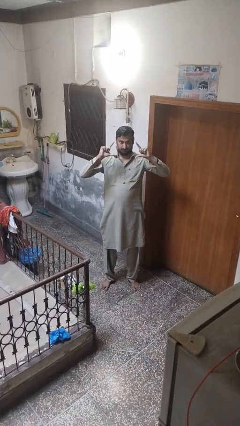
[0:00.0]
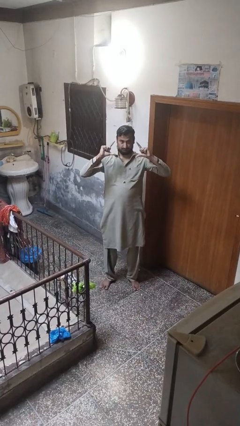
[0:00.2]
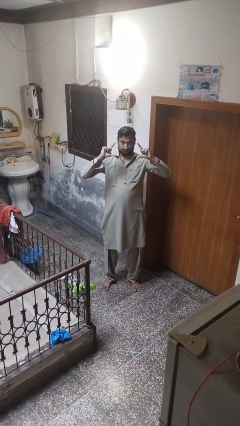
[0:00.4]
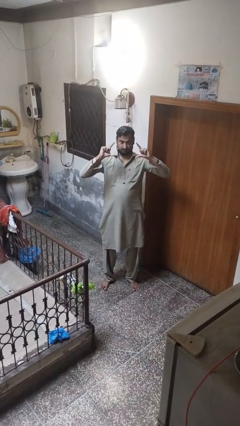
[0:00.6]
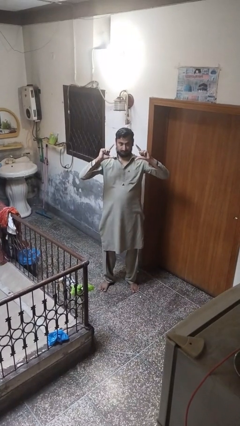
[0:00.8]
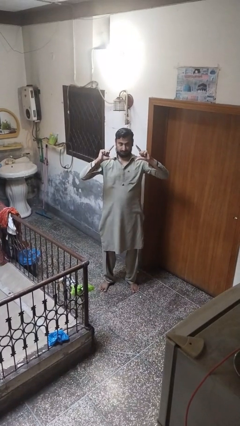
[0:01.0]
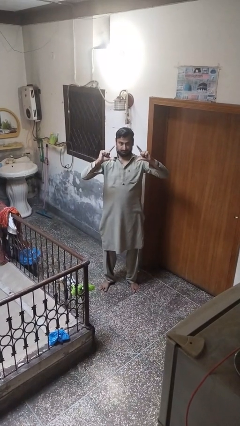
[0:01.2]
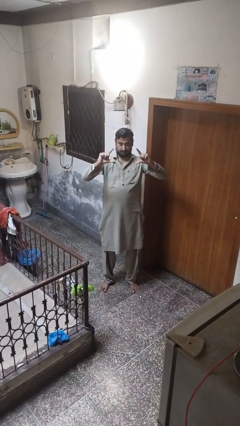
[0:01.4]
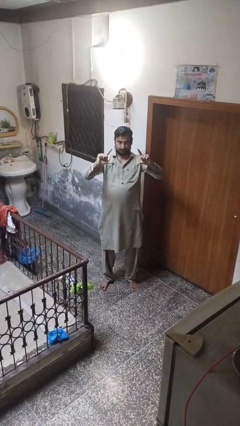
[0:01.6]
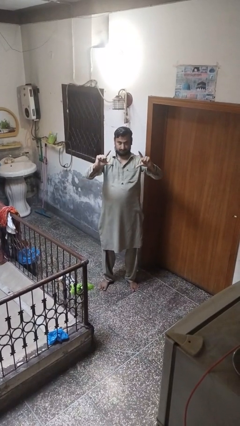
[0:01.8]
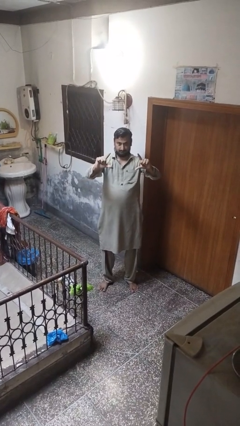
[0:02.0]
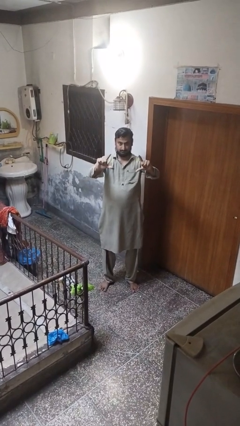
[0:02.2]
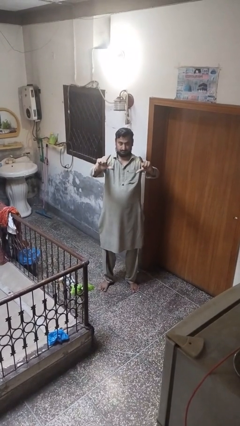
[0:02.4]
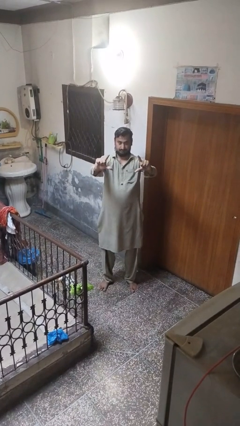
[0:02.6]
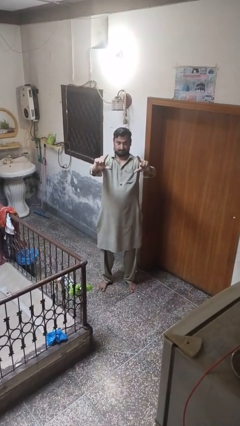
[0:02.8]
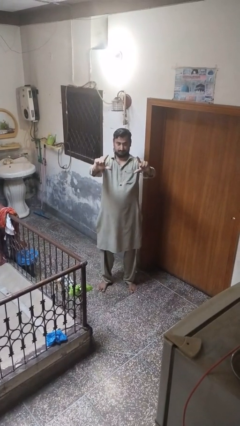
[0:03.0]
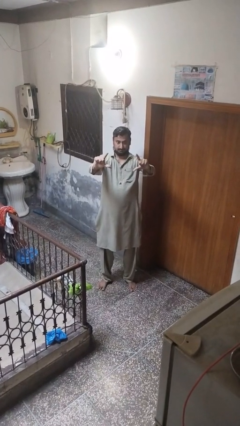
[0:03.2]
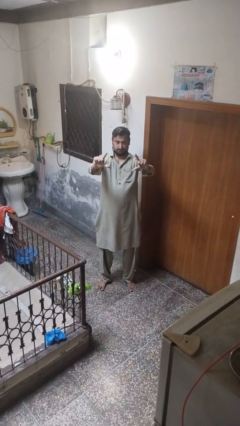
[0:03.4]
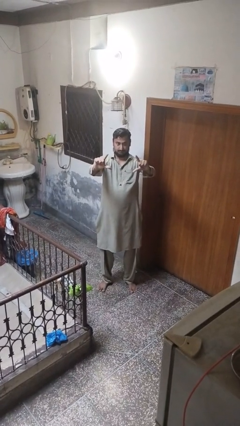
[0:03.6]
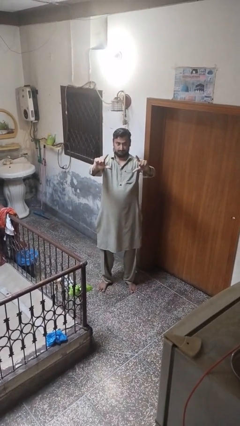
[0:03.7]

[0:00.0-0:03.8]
person gestures zoom out

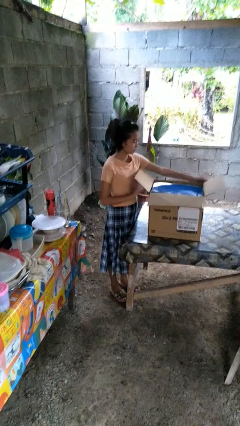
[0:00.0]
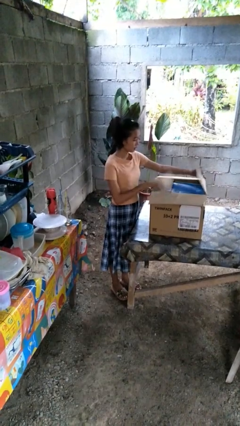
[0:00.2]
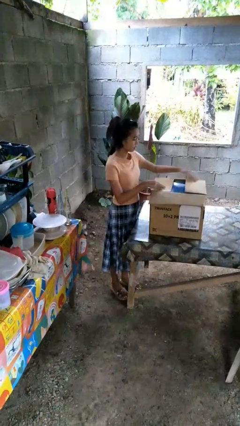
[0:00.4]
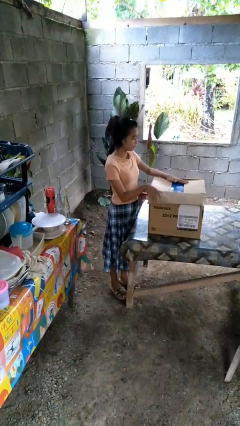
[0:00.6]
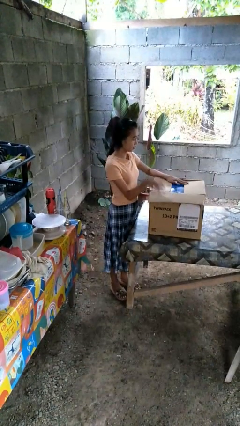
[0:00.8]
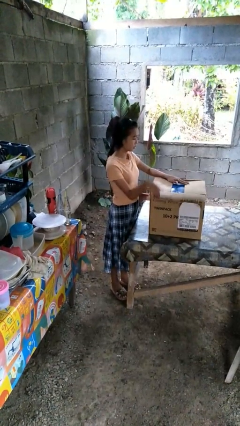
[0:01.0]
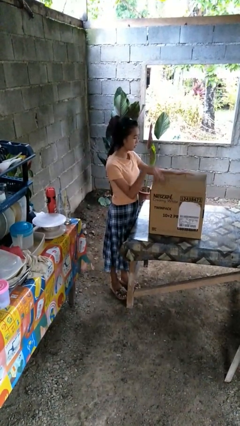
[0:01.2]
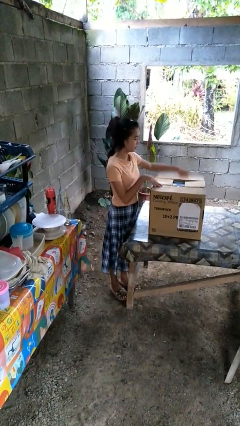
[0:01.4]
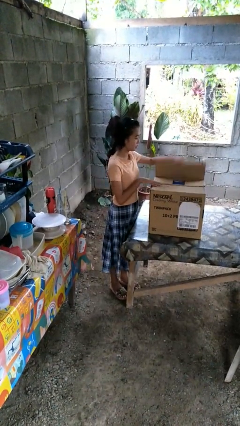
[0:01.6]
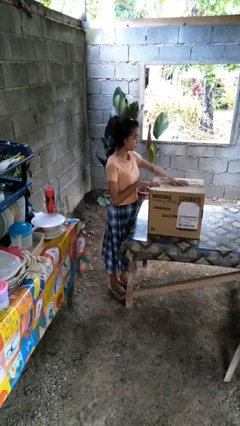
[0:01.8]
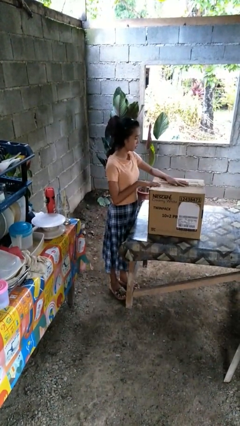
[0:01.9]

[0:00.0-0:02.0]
person closes box

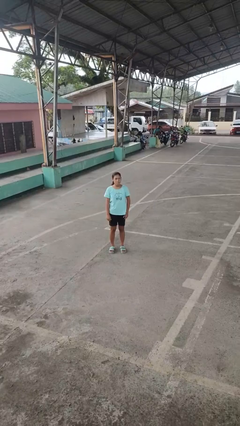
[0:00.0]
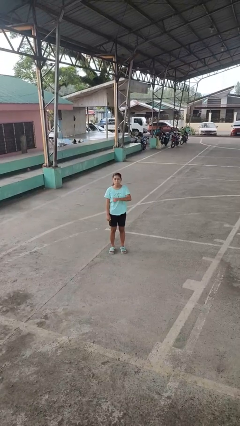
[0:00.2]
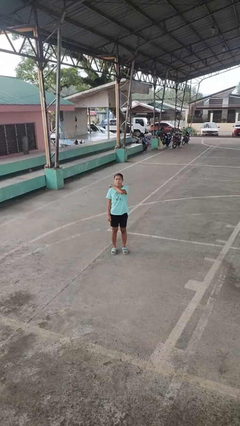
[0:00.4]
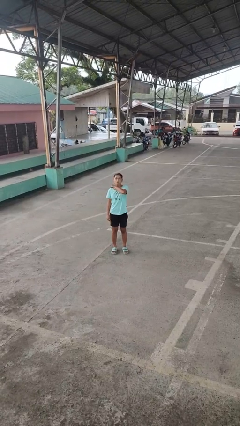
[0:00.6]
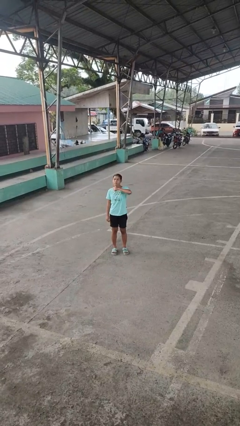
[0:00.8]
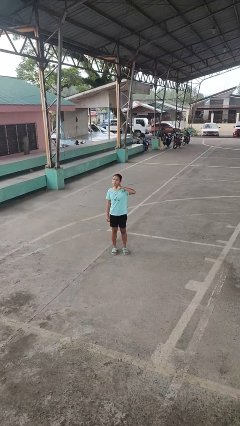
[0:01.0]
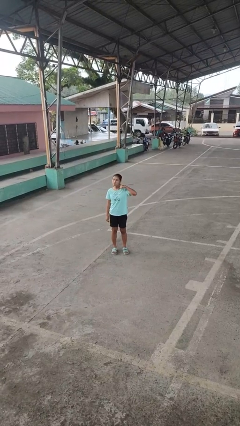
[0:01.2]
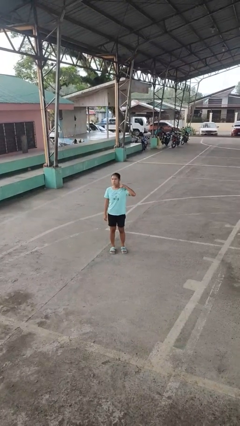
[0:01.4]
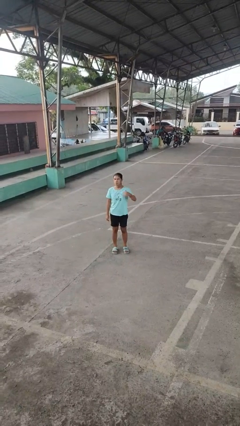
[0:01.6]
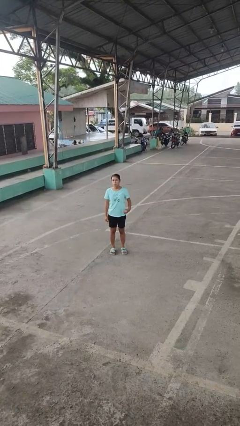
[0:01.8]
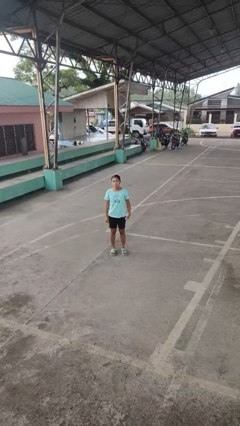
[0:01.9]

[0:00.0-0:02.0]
person gestures cut

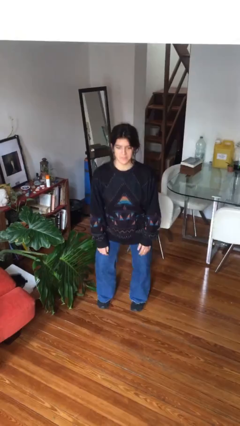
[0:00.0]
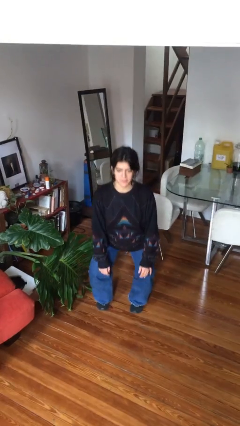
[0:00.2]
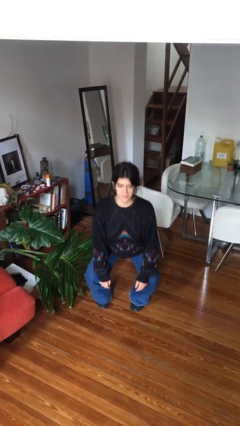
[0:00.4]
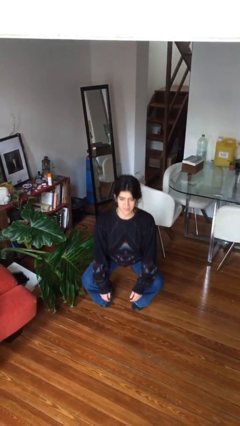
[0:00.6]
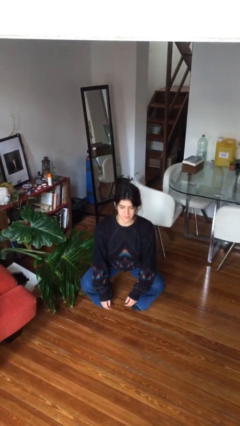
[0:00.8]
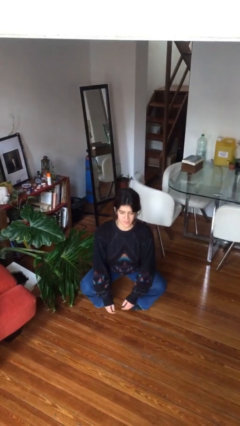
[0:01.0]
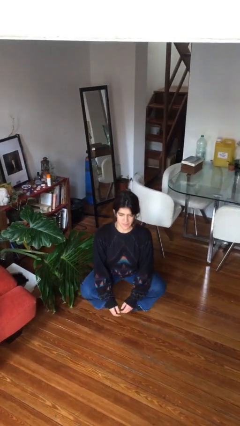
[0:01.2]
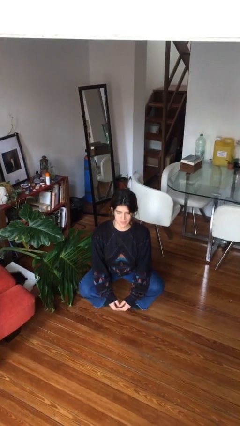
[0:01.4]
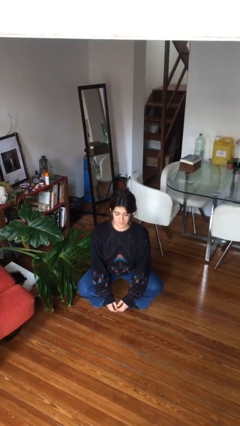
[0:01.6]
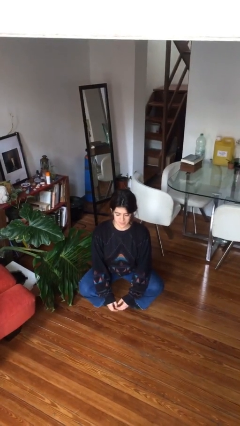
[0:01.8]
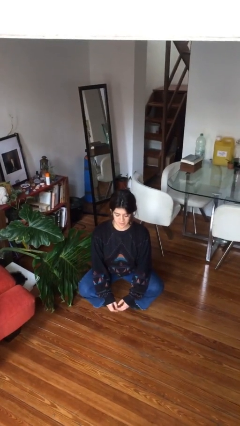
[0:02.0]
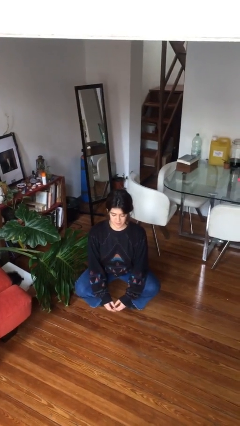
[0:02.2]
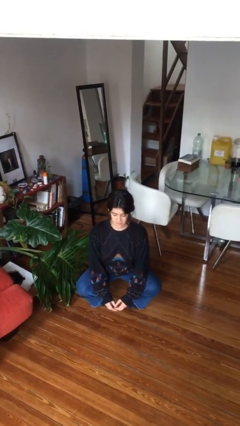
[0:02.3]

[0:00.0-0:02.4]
person squats

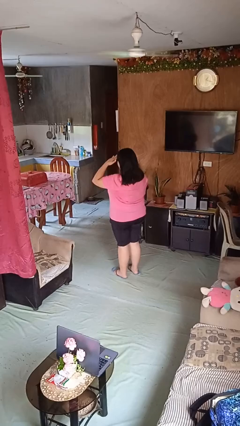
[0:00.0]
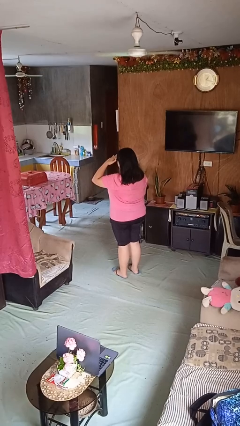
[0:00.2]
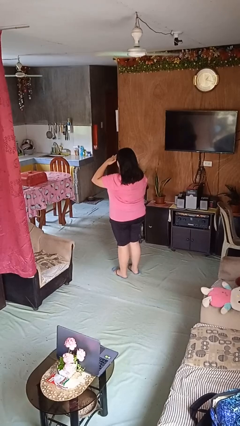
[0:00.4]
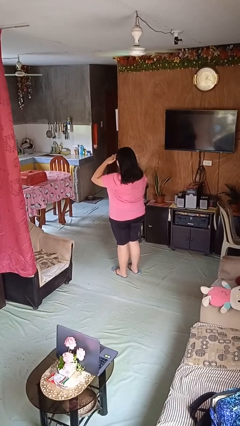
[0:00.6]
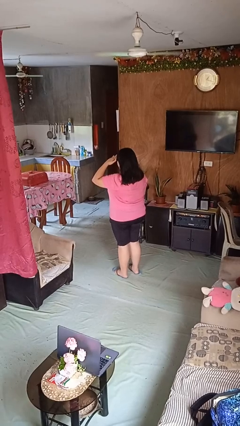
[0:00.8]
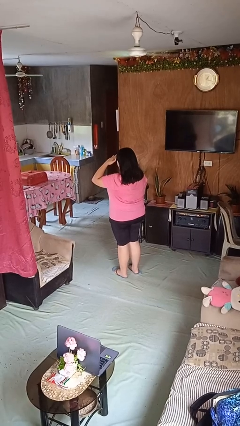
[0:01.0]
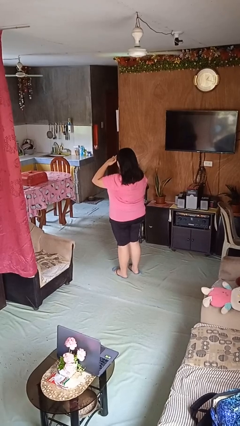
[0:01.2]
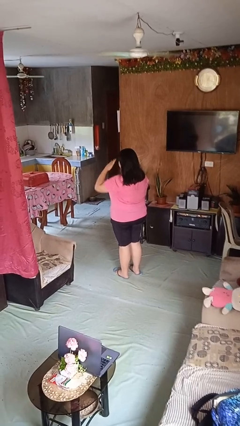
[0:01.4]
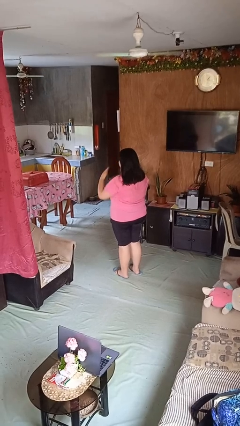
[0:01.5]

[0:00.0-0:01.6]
person salutes

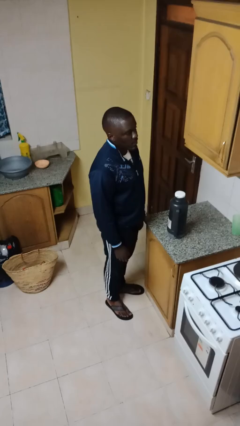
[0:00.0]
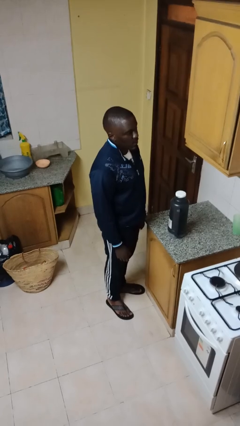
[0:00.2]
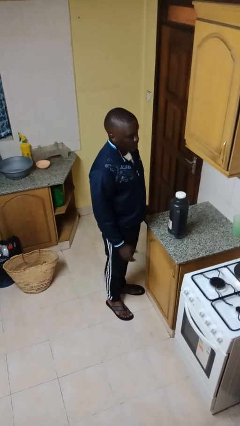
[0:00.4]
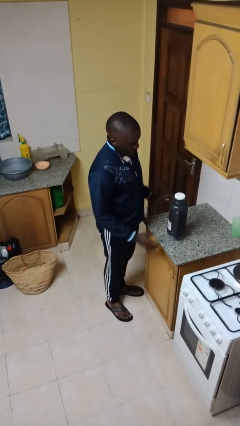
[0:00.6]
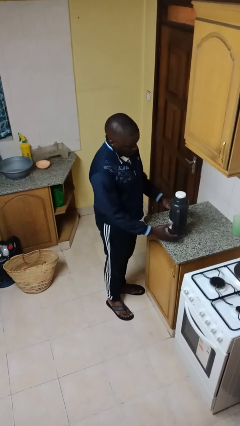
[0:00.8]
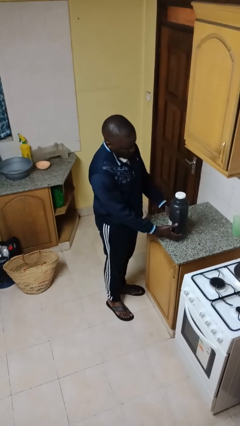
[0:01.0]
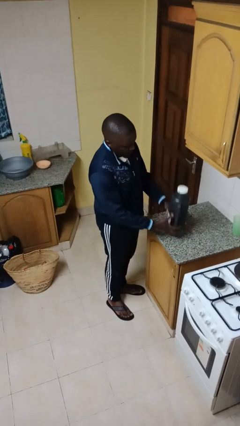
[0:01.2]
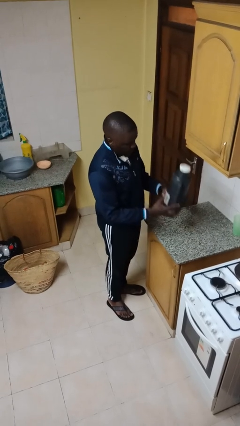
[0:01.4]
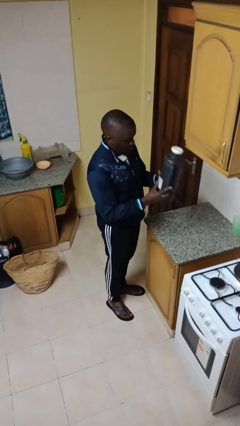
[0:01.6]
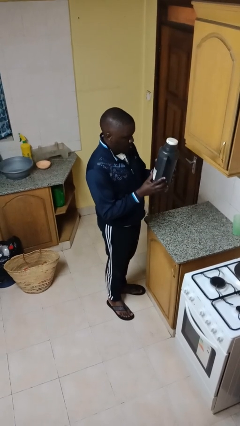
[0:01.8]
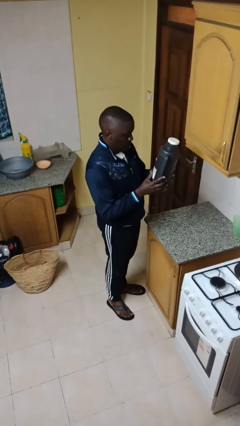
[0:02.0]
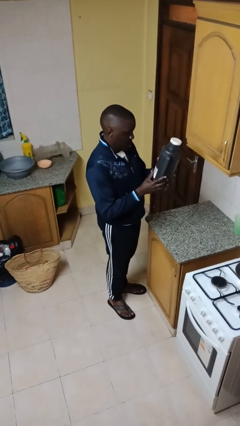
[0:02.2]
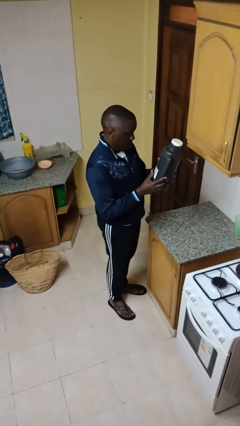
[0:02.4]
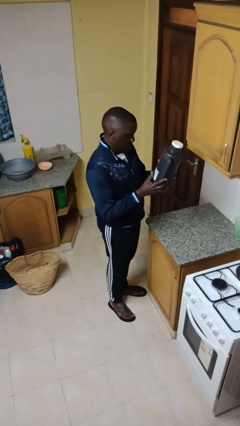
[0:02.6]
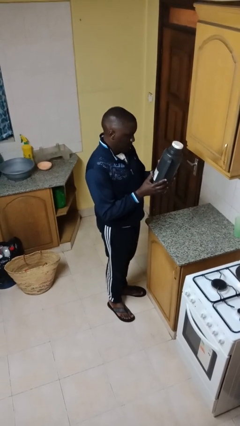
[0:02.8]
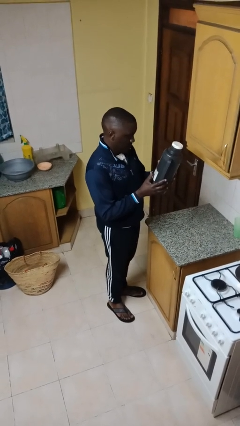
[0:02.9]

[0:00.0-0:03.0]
person picks up object from countertop

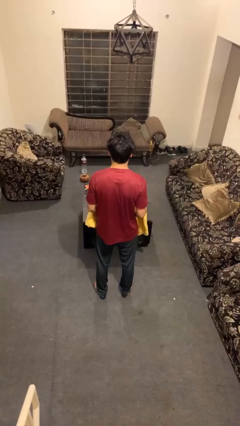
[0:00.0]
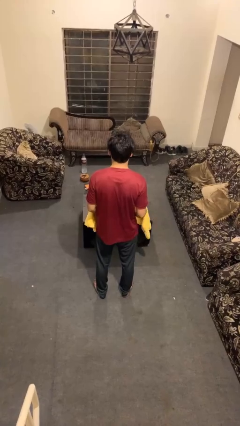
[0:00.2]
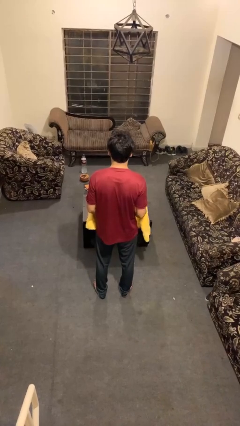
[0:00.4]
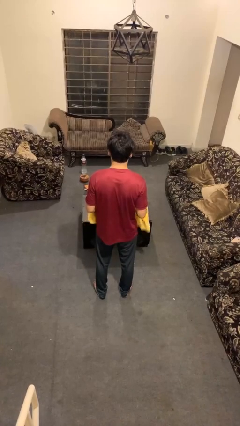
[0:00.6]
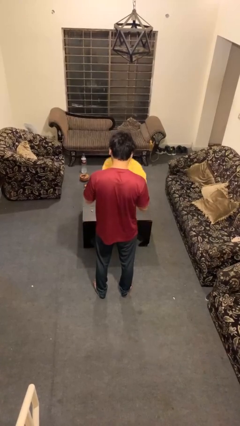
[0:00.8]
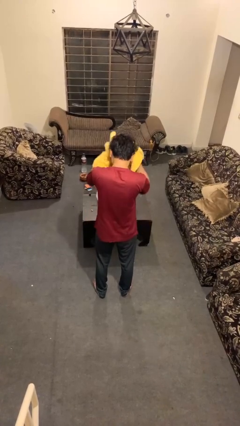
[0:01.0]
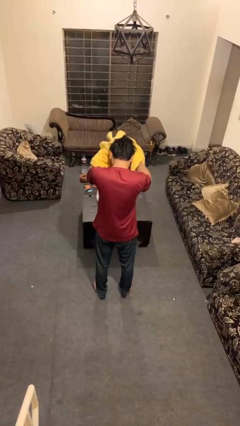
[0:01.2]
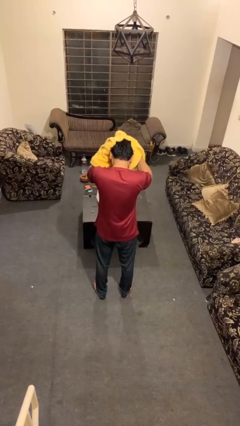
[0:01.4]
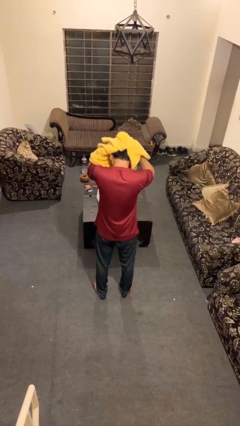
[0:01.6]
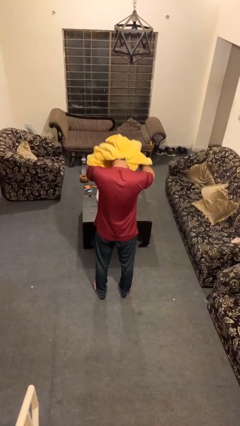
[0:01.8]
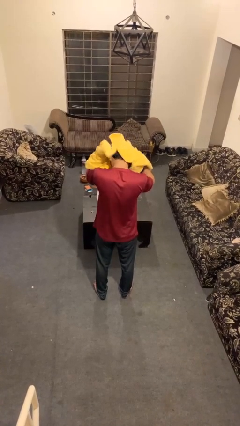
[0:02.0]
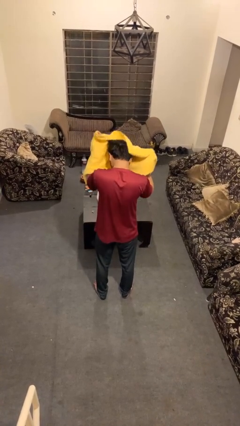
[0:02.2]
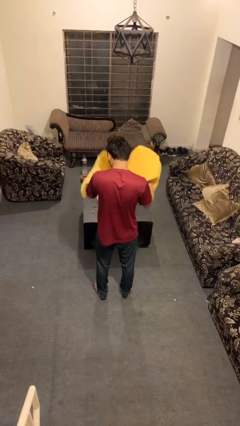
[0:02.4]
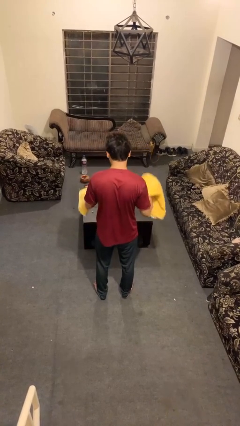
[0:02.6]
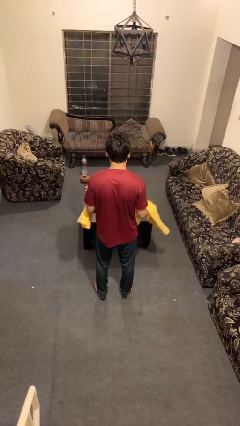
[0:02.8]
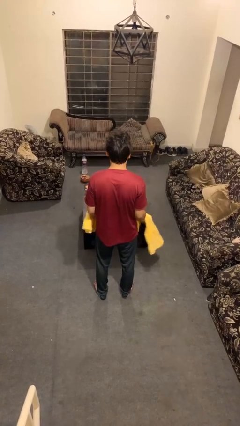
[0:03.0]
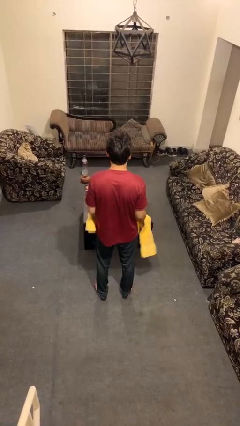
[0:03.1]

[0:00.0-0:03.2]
person dries hair with towel
